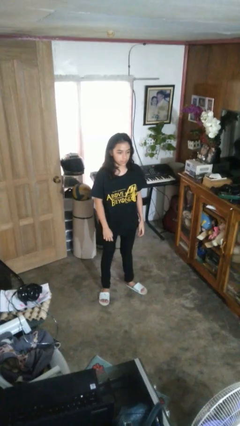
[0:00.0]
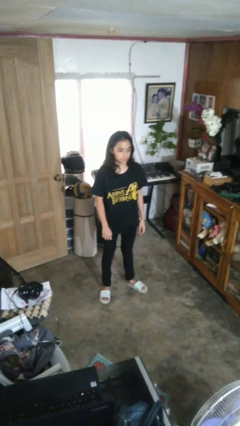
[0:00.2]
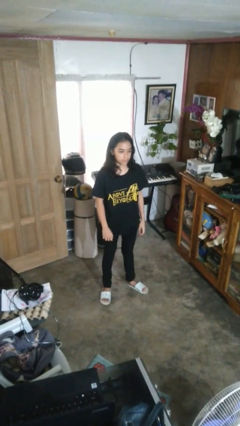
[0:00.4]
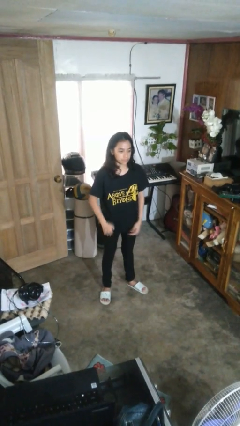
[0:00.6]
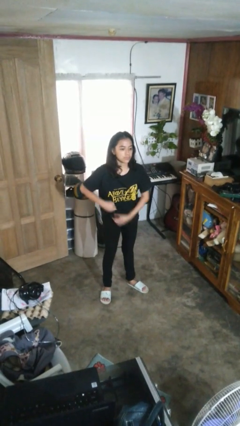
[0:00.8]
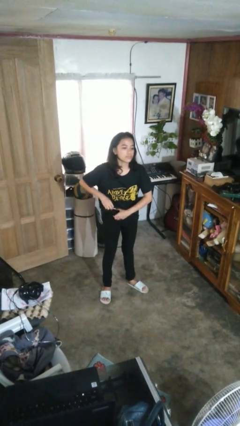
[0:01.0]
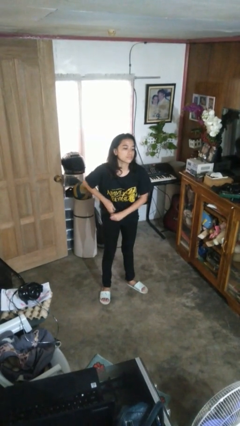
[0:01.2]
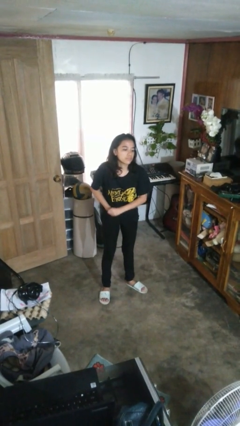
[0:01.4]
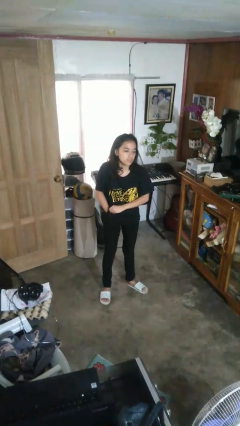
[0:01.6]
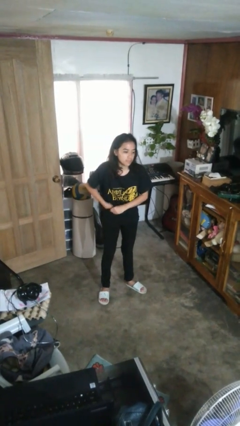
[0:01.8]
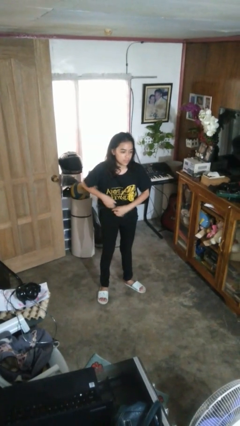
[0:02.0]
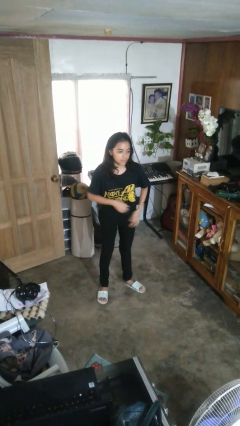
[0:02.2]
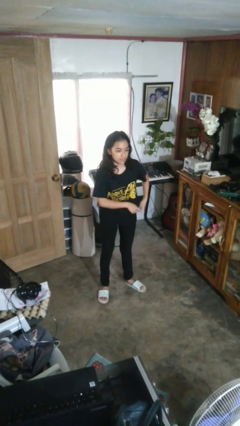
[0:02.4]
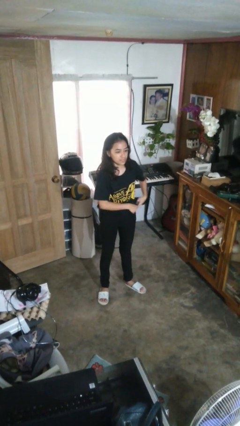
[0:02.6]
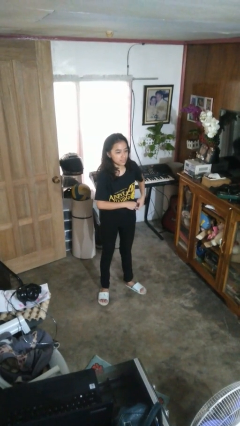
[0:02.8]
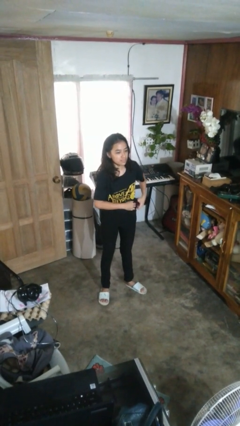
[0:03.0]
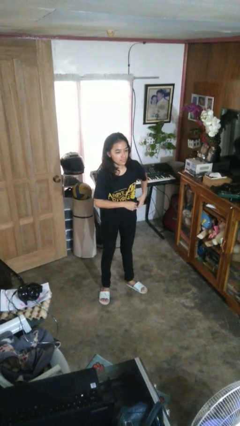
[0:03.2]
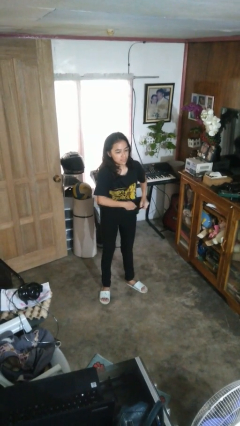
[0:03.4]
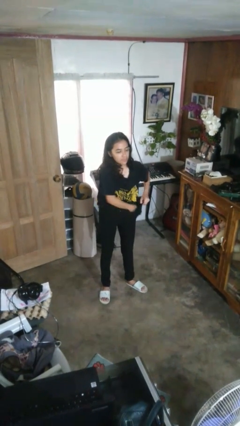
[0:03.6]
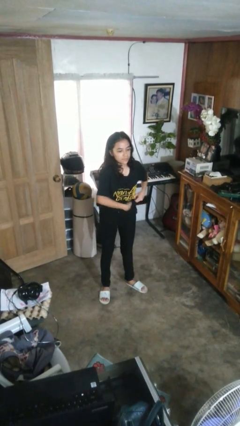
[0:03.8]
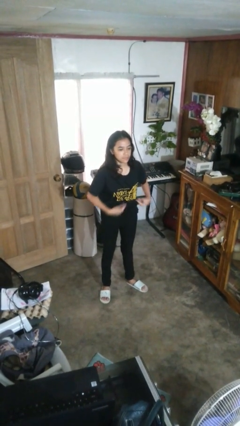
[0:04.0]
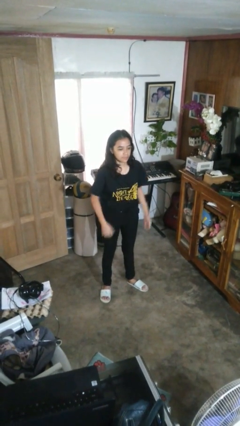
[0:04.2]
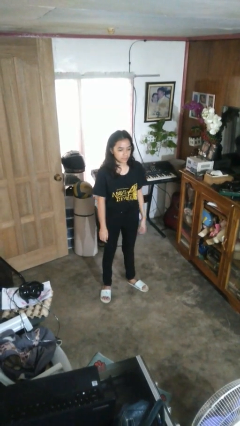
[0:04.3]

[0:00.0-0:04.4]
person tucks in shirt

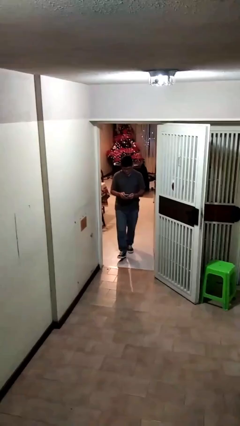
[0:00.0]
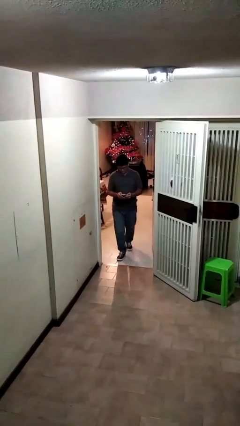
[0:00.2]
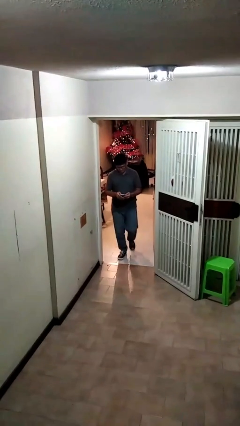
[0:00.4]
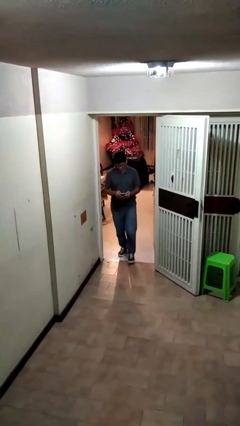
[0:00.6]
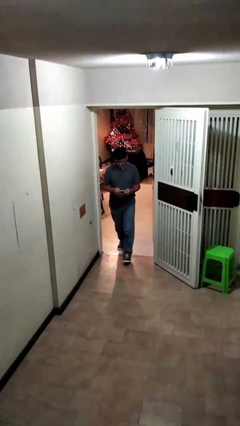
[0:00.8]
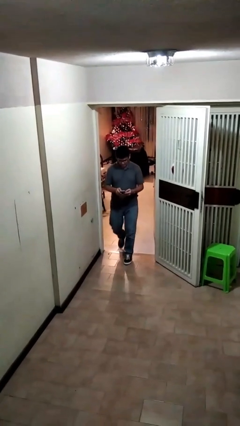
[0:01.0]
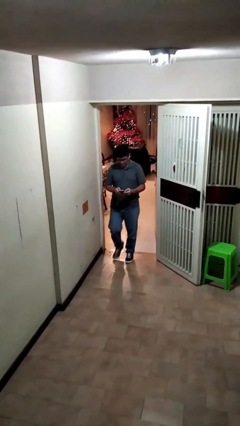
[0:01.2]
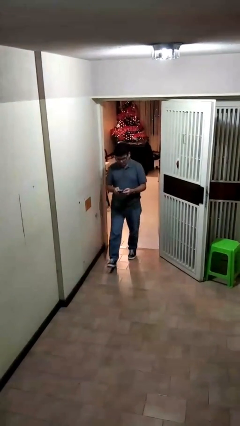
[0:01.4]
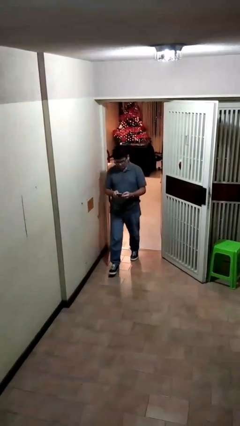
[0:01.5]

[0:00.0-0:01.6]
person enters scene through structure

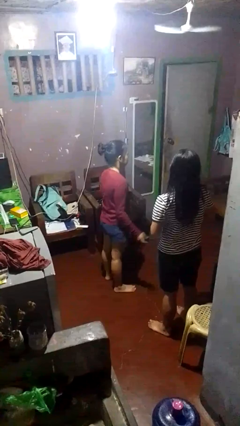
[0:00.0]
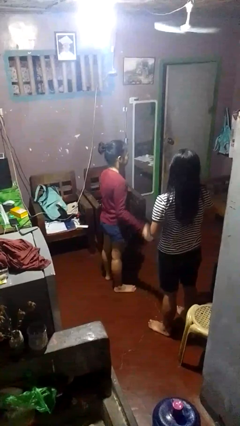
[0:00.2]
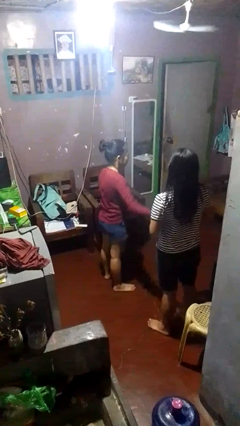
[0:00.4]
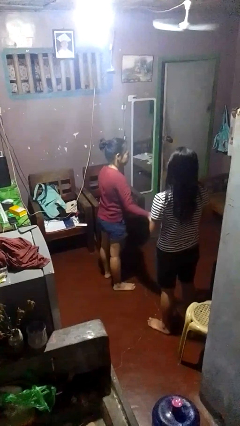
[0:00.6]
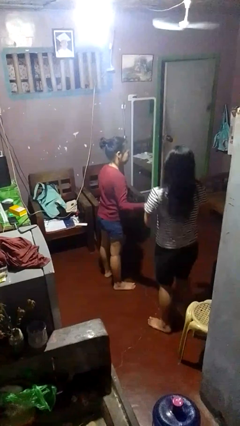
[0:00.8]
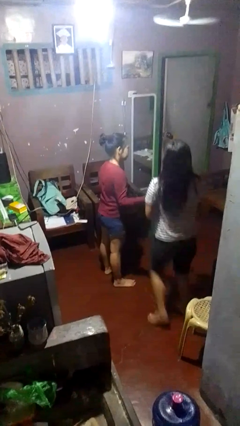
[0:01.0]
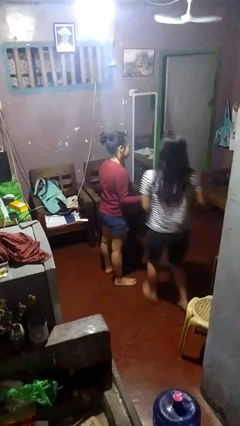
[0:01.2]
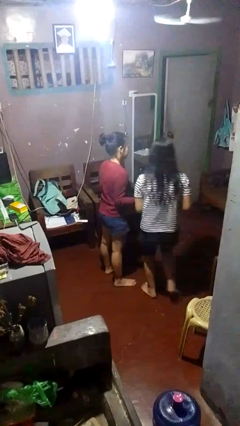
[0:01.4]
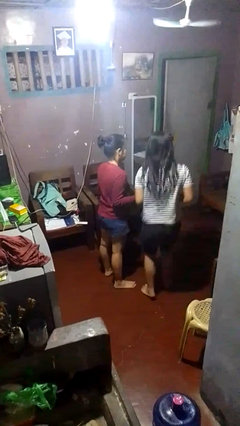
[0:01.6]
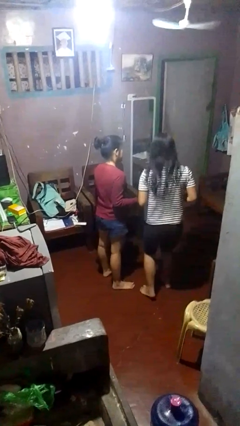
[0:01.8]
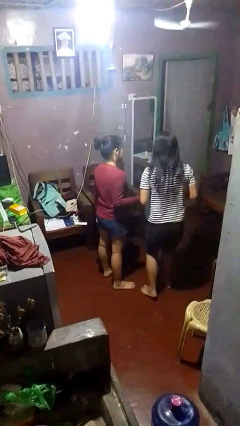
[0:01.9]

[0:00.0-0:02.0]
person grabs person by forearm

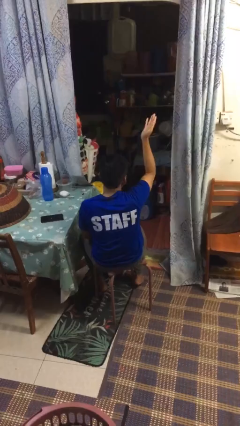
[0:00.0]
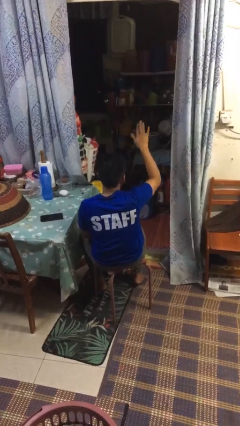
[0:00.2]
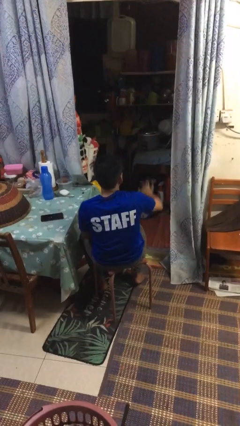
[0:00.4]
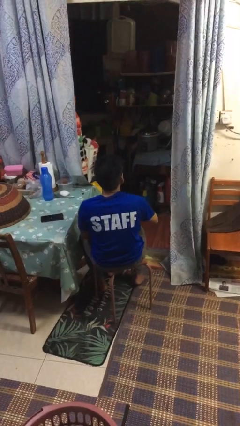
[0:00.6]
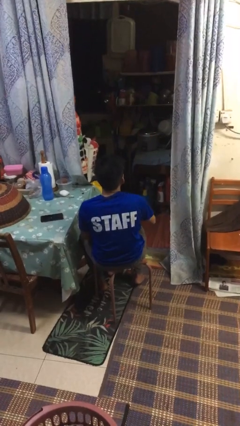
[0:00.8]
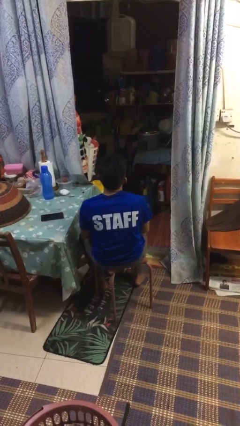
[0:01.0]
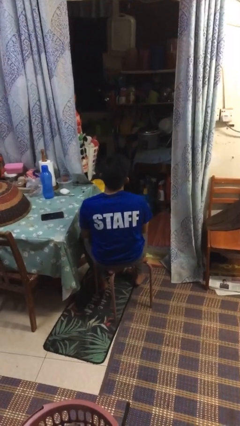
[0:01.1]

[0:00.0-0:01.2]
person gestures swipe down

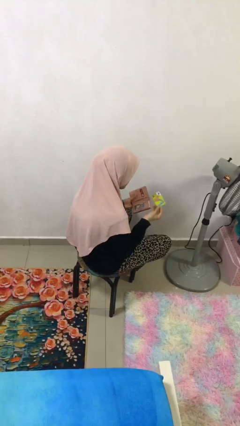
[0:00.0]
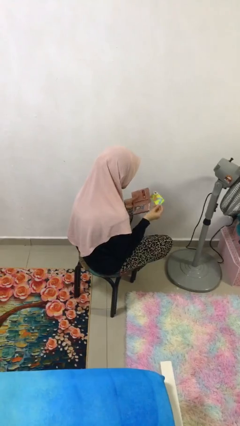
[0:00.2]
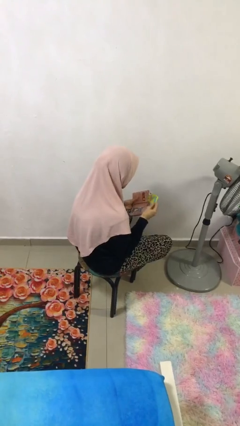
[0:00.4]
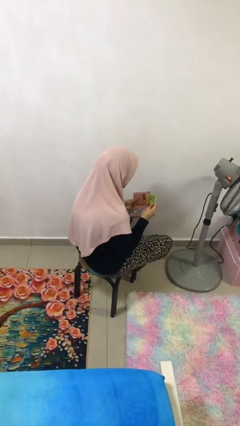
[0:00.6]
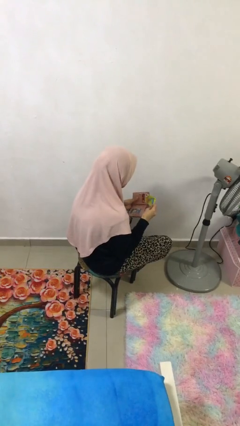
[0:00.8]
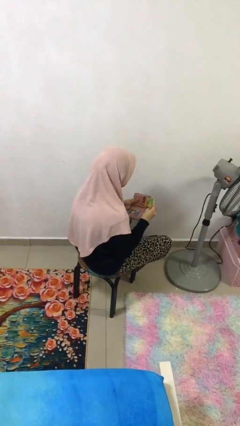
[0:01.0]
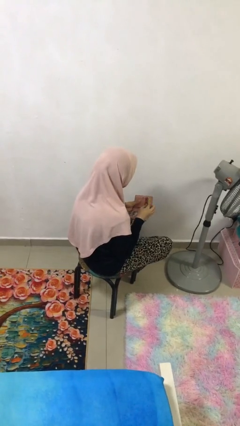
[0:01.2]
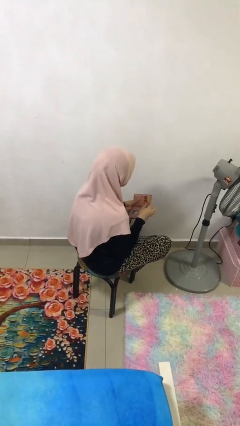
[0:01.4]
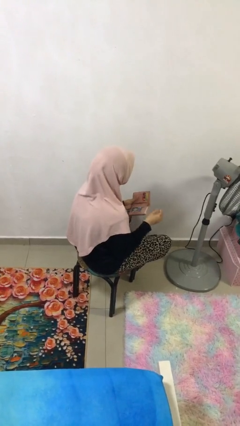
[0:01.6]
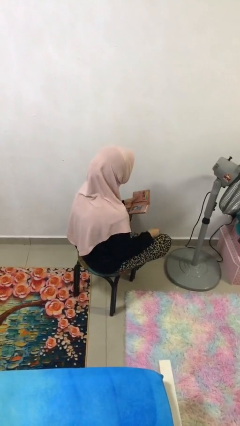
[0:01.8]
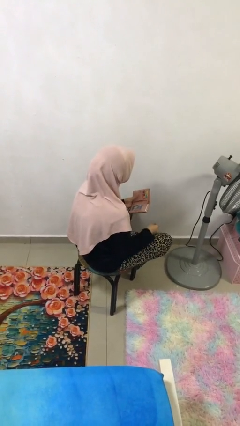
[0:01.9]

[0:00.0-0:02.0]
person puts object into purse

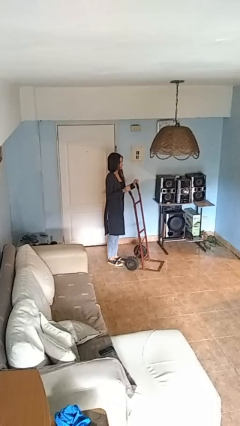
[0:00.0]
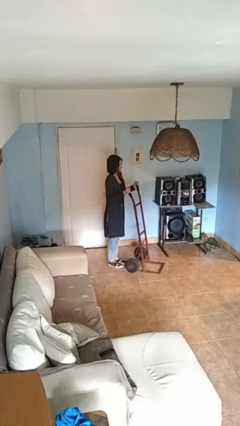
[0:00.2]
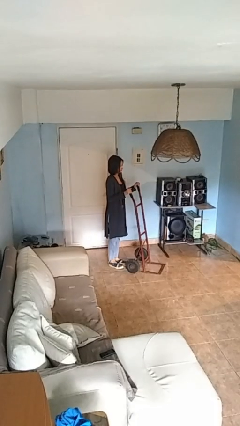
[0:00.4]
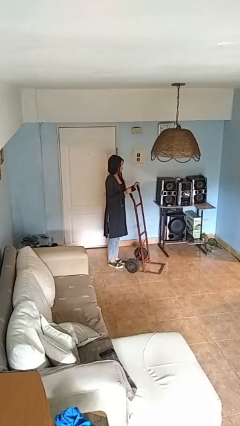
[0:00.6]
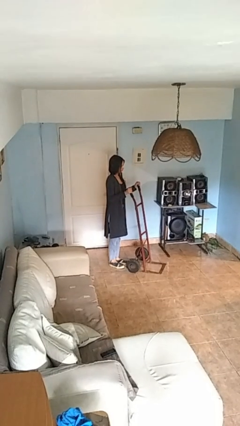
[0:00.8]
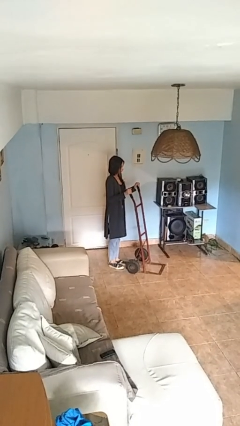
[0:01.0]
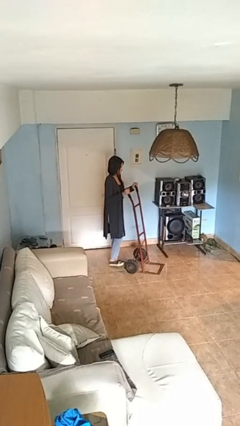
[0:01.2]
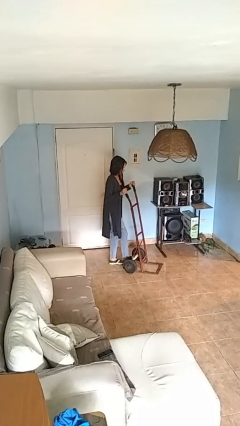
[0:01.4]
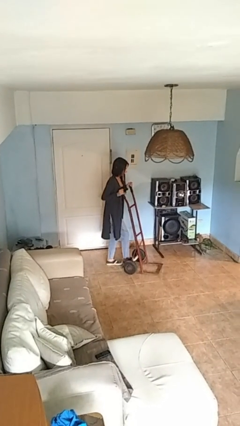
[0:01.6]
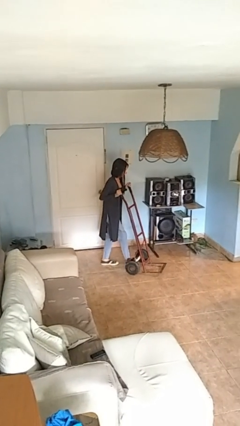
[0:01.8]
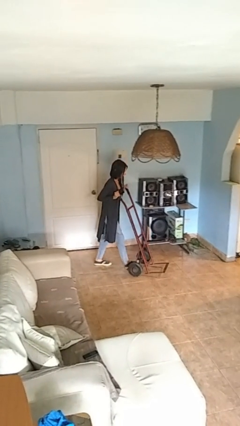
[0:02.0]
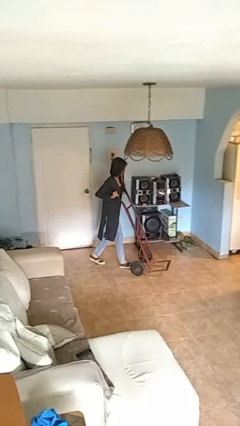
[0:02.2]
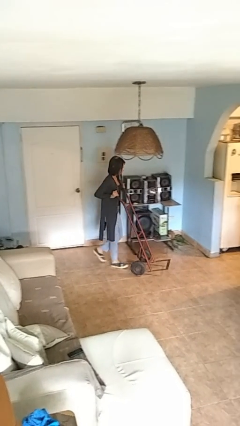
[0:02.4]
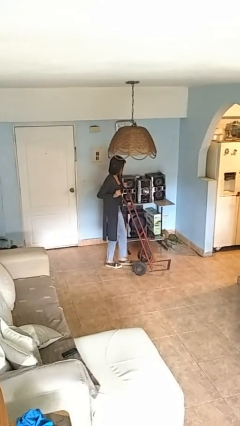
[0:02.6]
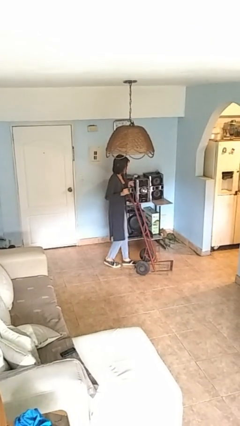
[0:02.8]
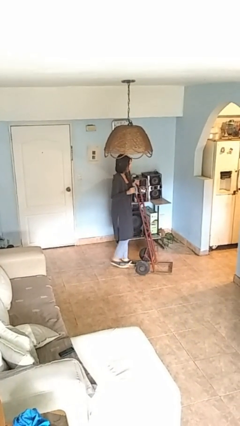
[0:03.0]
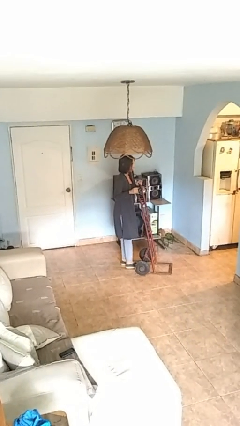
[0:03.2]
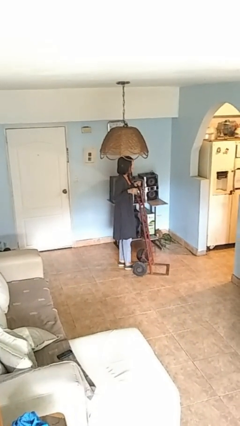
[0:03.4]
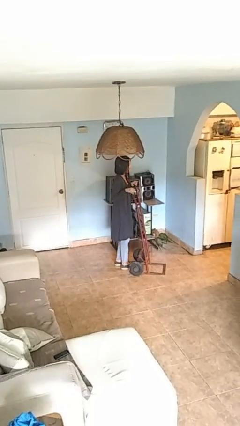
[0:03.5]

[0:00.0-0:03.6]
person pushes wheeled cart

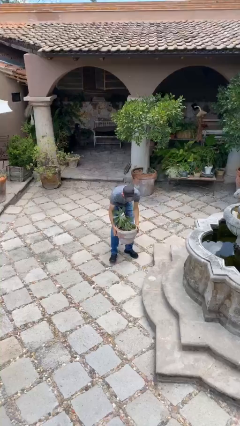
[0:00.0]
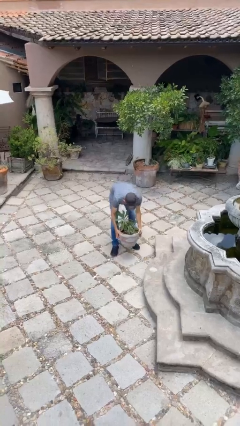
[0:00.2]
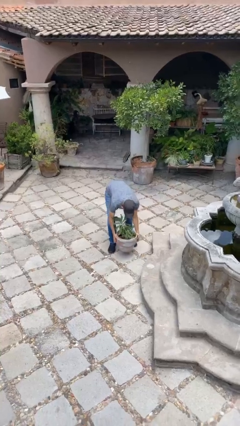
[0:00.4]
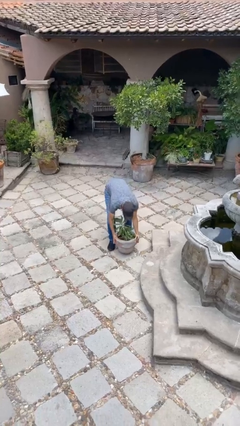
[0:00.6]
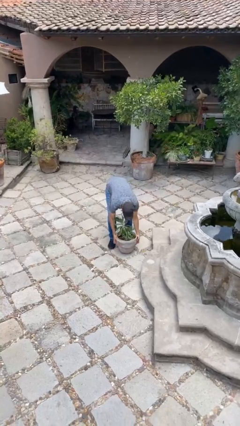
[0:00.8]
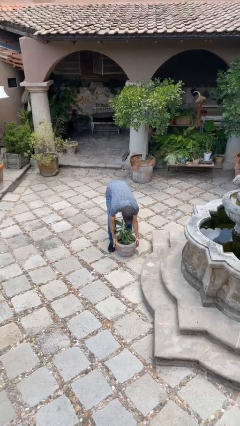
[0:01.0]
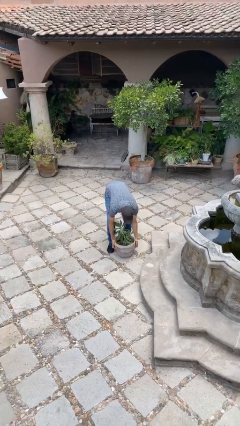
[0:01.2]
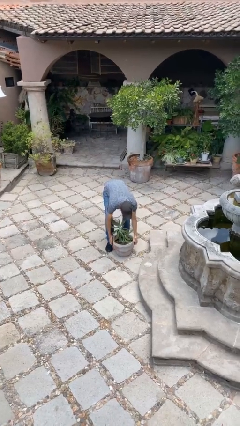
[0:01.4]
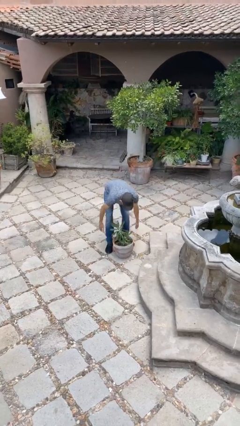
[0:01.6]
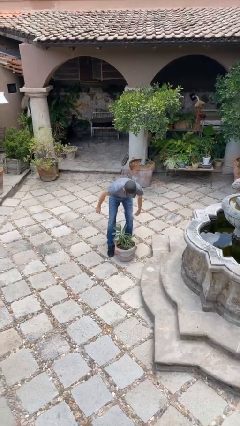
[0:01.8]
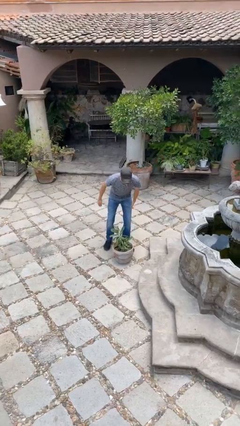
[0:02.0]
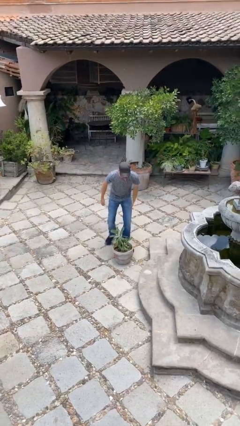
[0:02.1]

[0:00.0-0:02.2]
person puts down object on floor

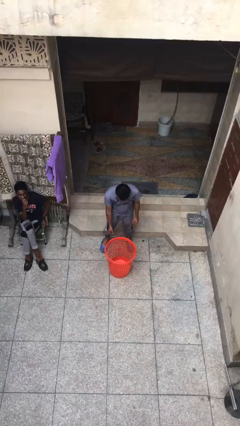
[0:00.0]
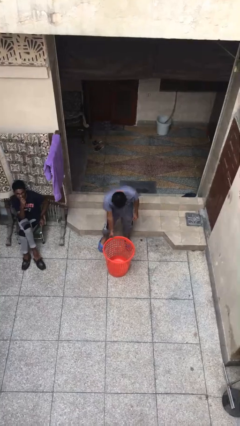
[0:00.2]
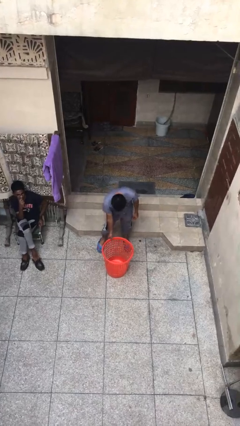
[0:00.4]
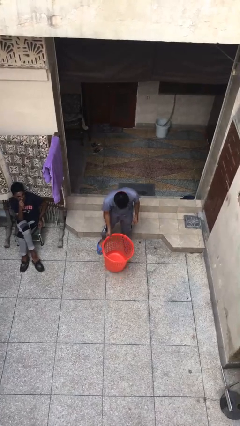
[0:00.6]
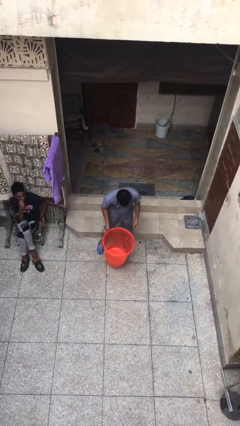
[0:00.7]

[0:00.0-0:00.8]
person picks up object from floor
